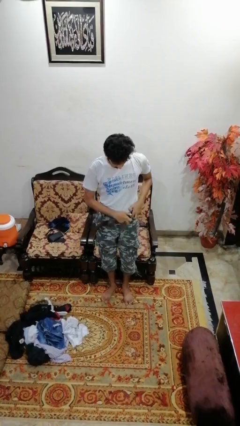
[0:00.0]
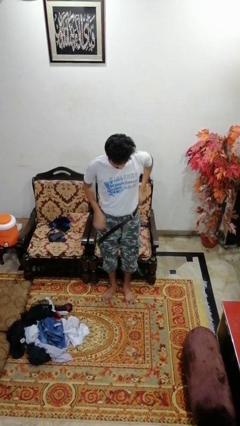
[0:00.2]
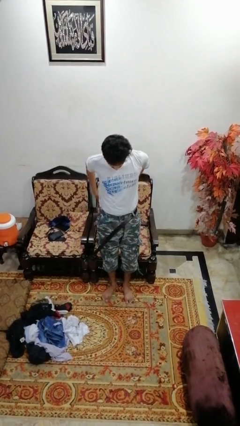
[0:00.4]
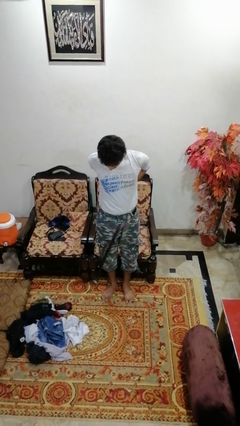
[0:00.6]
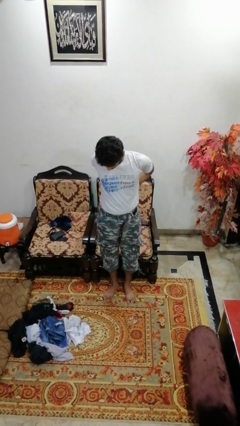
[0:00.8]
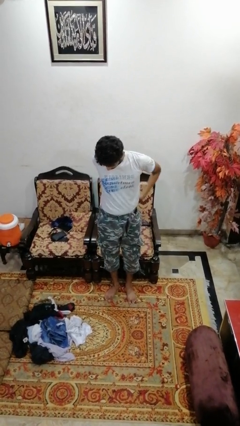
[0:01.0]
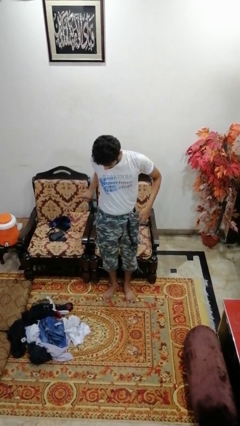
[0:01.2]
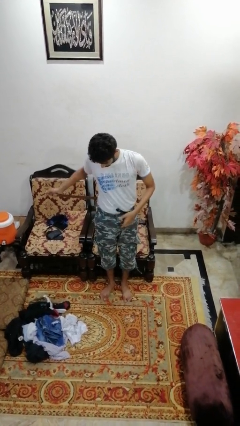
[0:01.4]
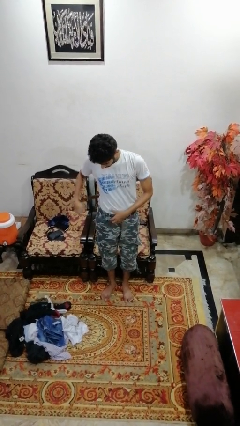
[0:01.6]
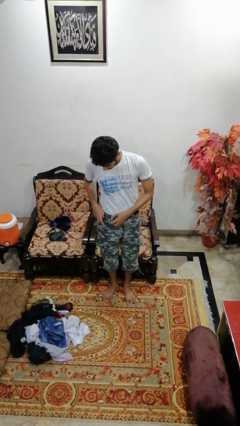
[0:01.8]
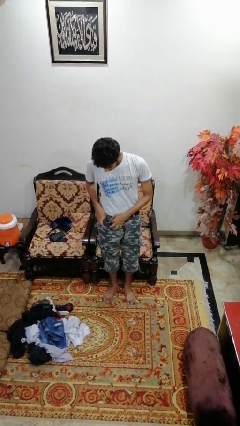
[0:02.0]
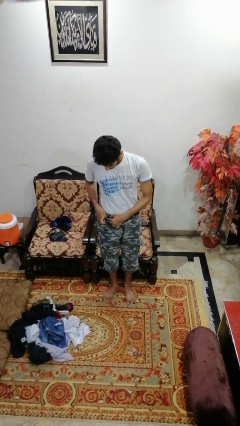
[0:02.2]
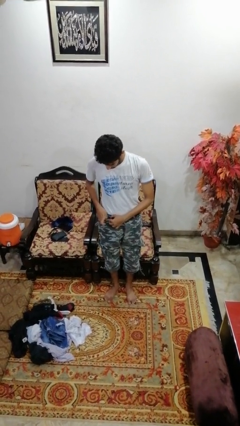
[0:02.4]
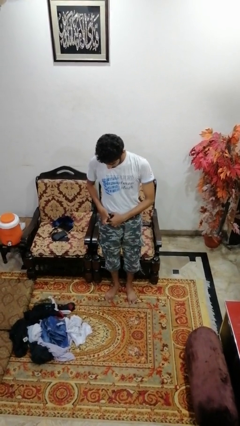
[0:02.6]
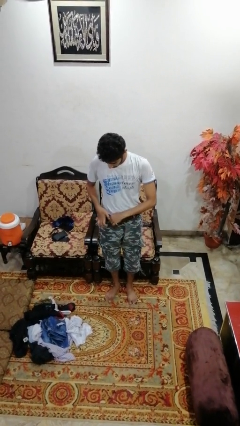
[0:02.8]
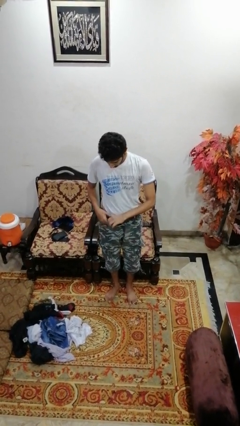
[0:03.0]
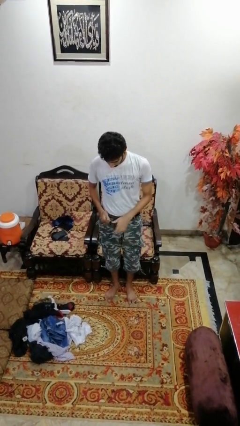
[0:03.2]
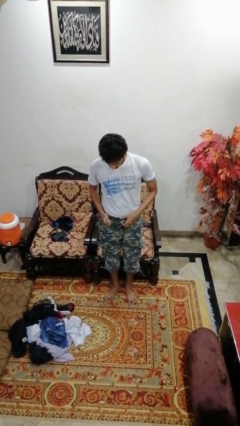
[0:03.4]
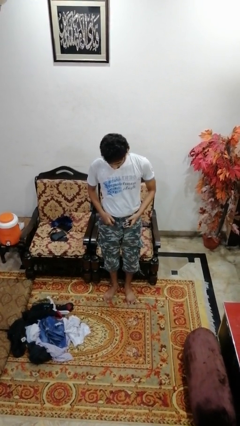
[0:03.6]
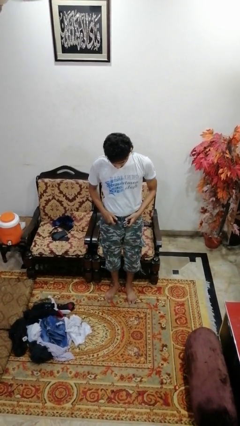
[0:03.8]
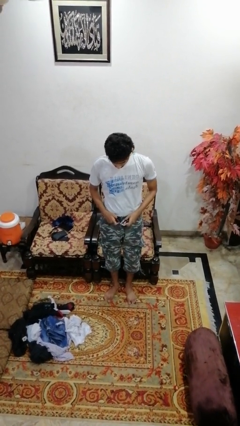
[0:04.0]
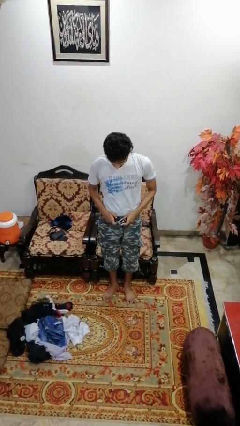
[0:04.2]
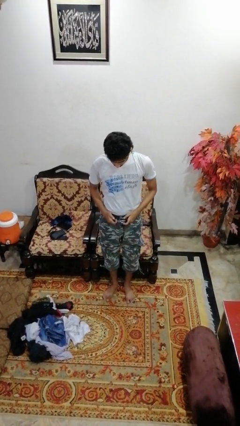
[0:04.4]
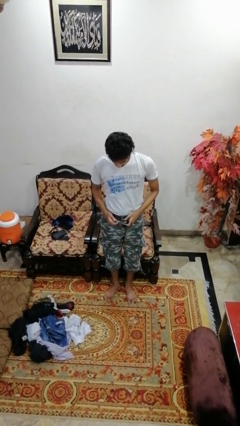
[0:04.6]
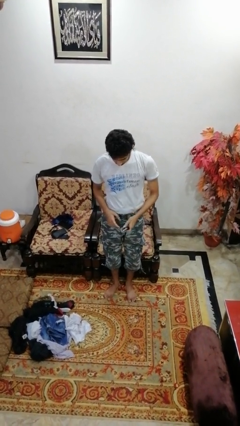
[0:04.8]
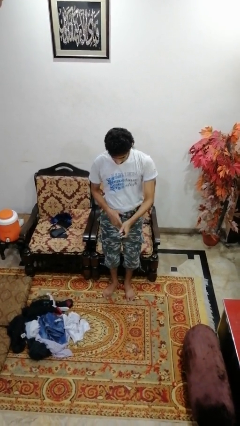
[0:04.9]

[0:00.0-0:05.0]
person puts on belt

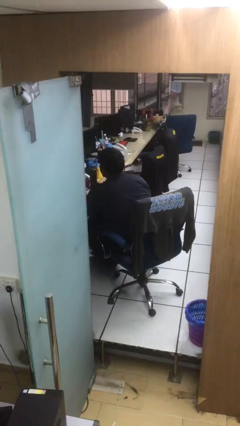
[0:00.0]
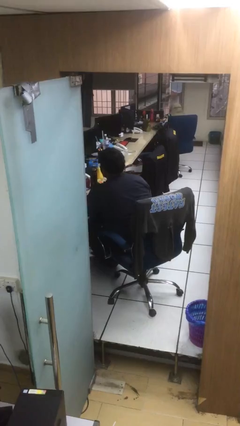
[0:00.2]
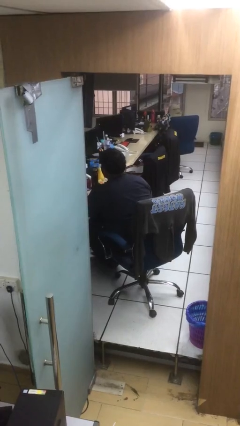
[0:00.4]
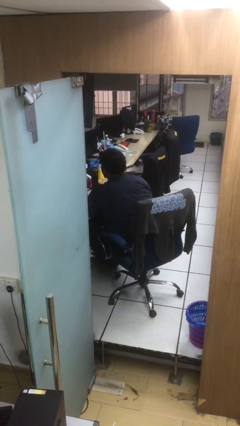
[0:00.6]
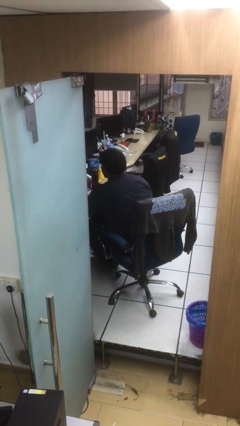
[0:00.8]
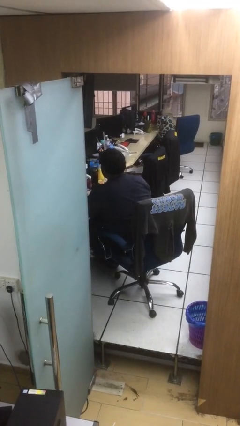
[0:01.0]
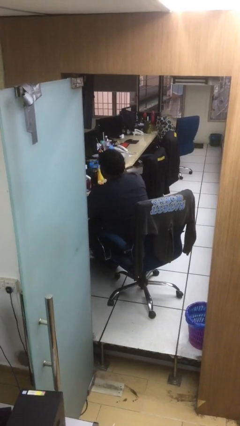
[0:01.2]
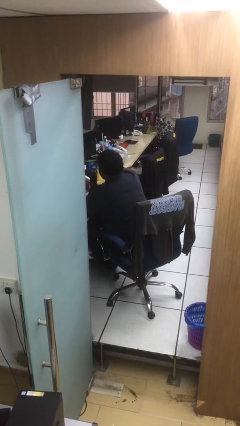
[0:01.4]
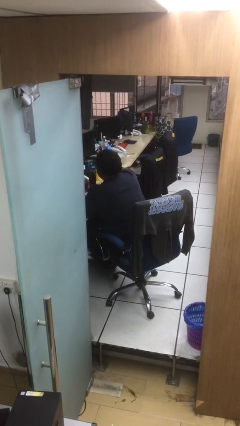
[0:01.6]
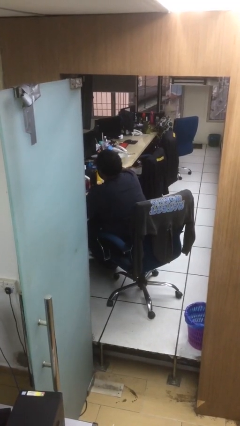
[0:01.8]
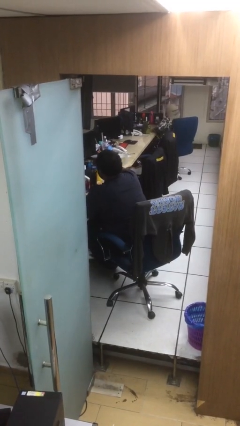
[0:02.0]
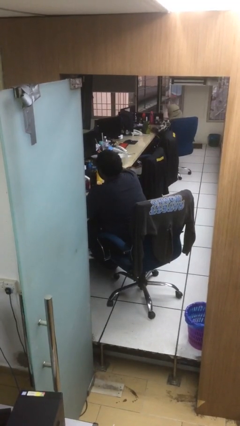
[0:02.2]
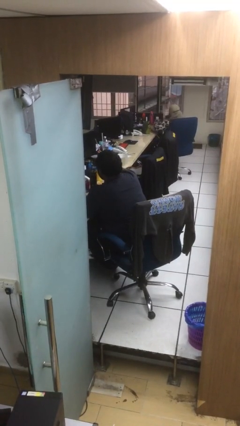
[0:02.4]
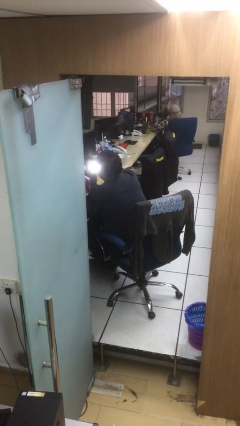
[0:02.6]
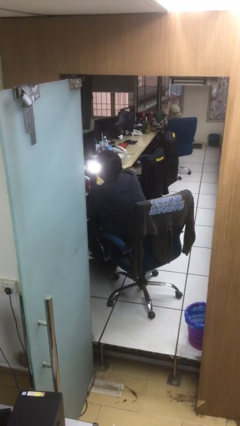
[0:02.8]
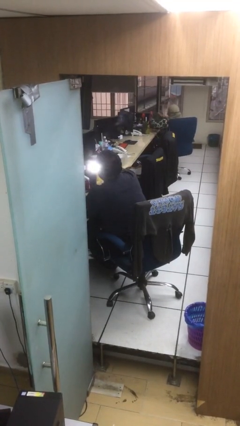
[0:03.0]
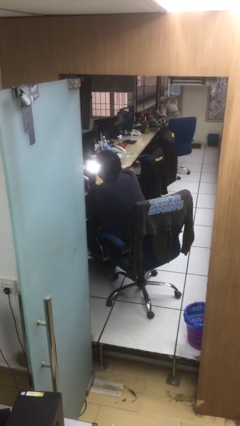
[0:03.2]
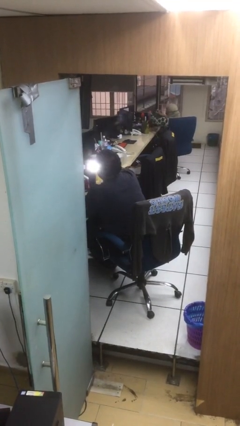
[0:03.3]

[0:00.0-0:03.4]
person turns on lamp

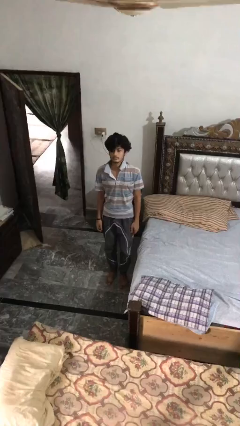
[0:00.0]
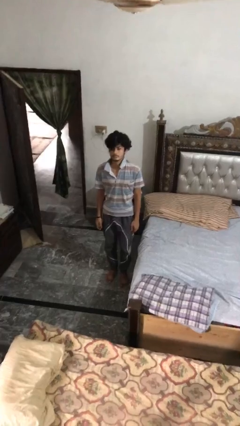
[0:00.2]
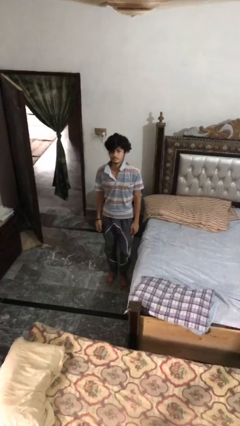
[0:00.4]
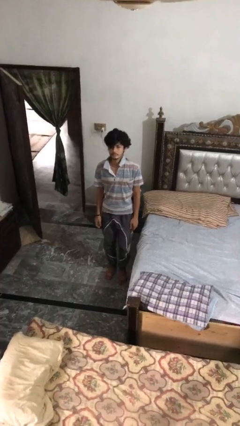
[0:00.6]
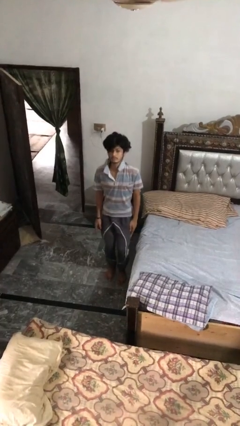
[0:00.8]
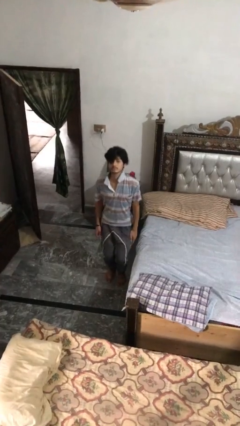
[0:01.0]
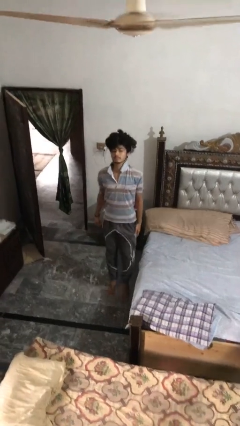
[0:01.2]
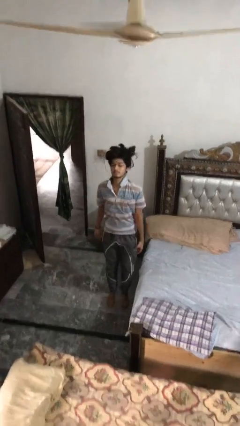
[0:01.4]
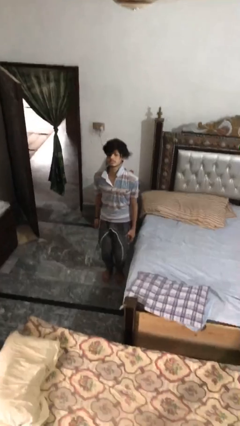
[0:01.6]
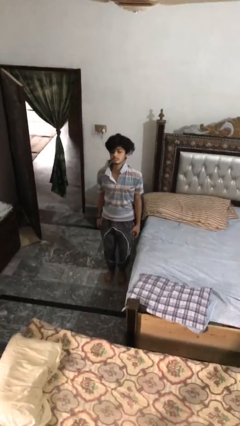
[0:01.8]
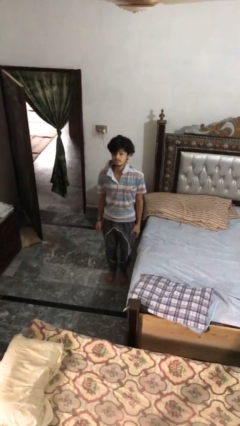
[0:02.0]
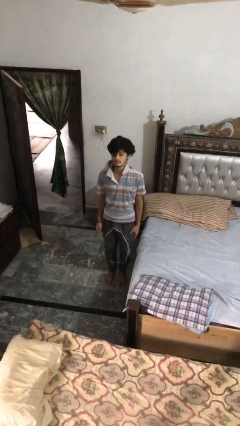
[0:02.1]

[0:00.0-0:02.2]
person jumps

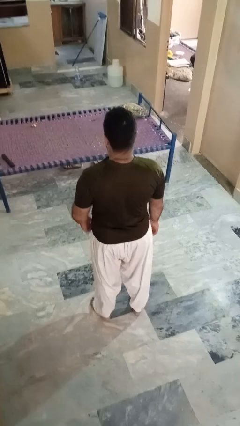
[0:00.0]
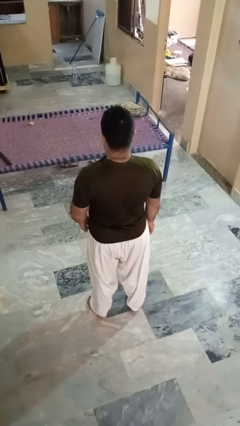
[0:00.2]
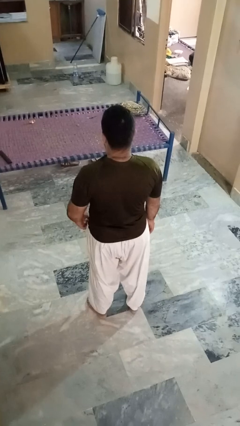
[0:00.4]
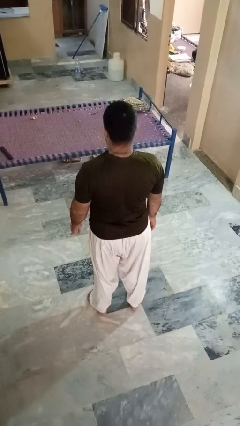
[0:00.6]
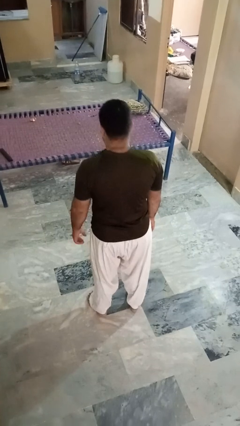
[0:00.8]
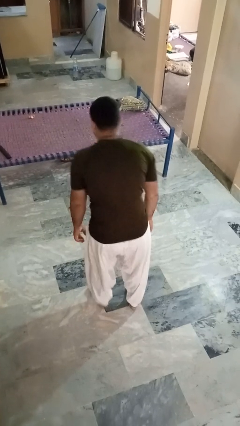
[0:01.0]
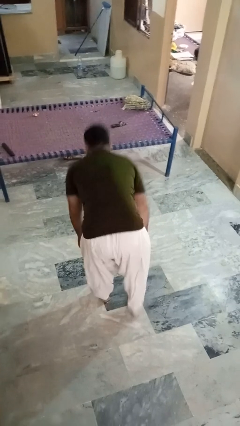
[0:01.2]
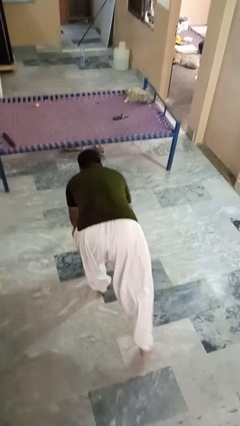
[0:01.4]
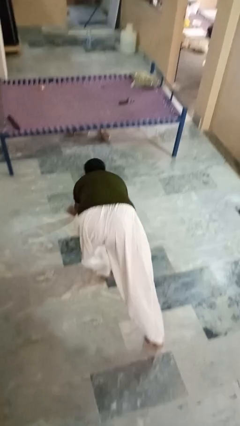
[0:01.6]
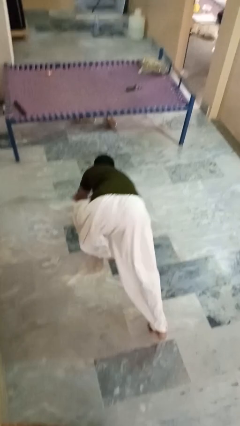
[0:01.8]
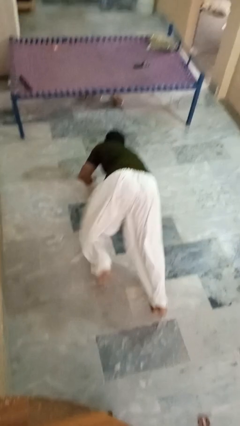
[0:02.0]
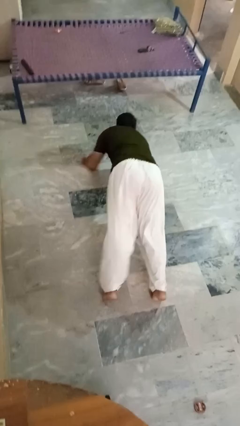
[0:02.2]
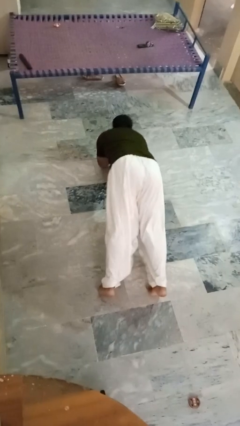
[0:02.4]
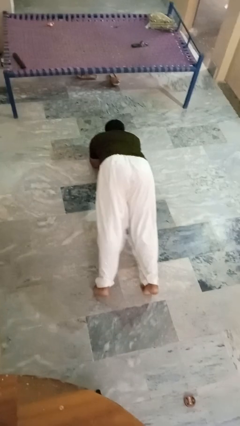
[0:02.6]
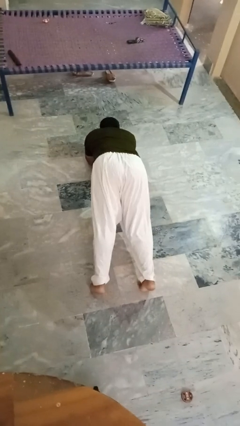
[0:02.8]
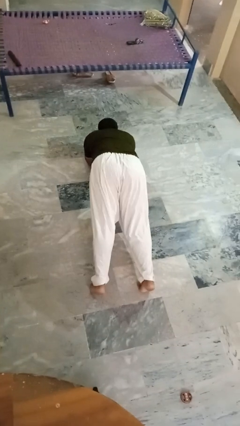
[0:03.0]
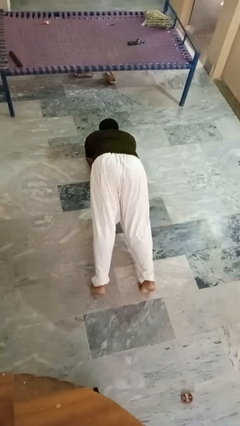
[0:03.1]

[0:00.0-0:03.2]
person exercises with plank

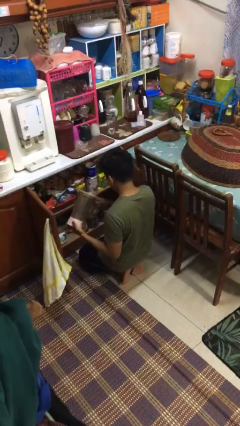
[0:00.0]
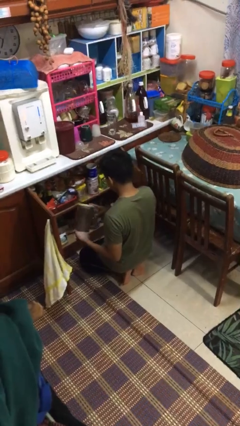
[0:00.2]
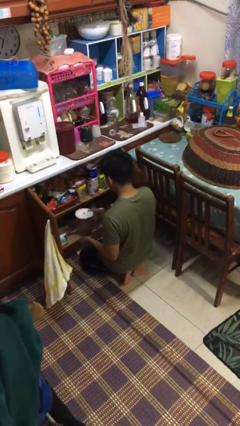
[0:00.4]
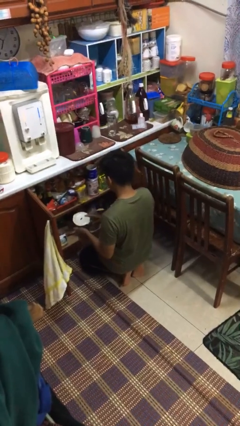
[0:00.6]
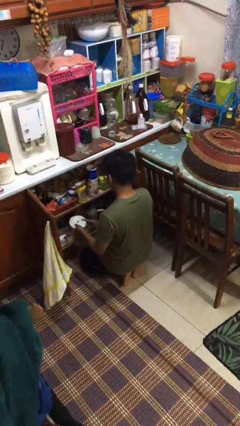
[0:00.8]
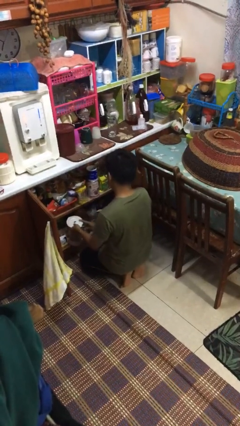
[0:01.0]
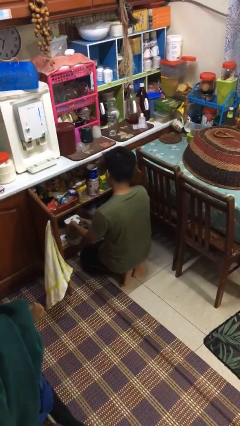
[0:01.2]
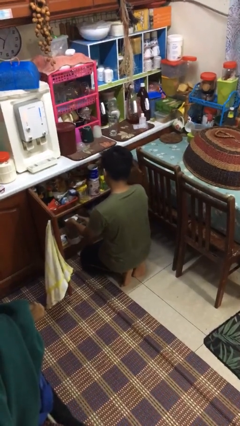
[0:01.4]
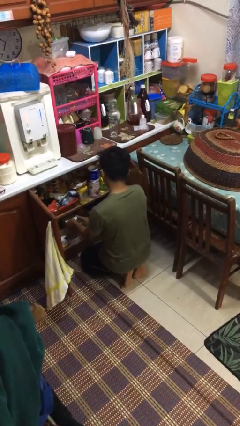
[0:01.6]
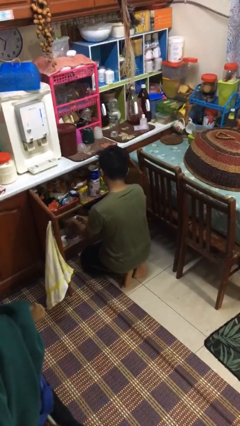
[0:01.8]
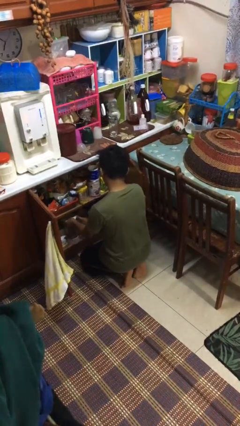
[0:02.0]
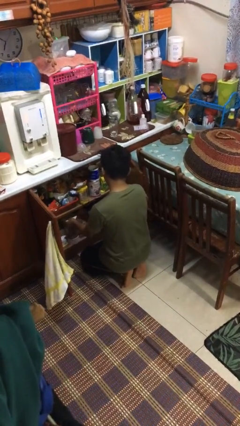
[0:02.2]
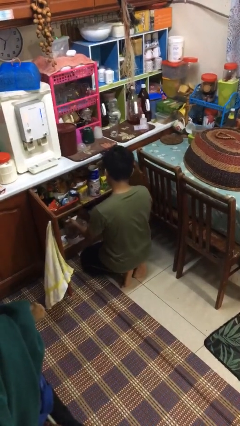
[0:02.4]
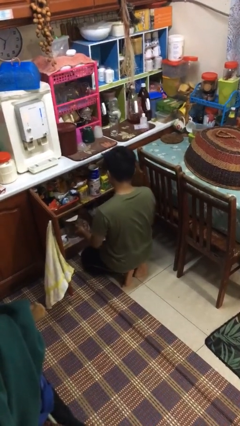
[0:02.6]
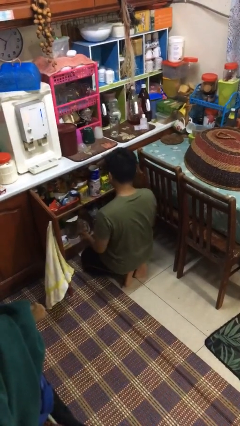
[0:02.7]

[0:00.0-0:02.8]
person puts object in cabinet

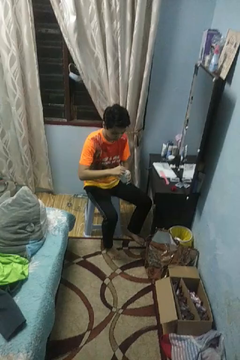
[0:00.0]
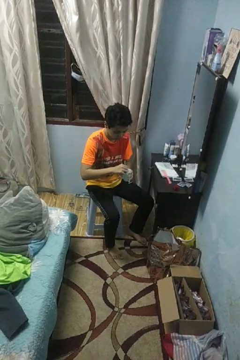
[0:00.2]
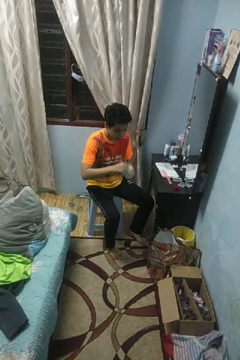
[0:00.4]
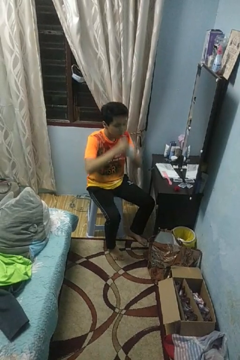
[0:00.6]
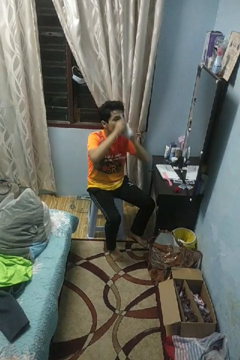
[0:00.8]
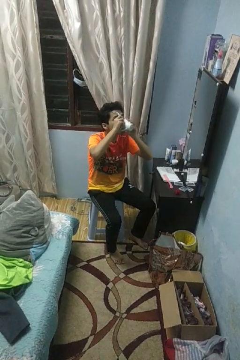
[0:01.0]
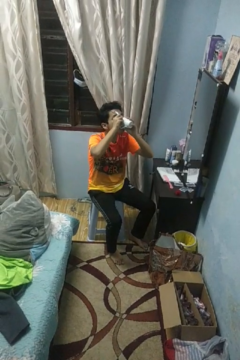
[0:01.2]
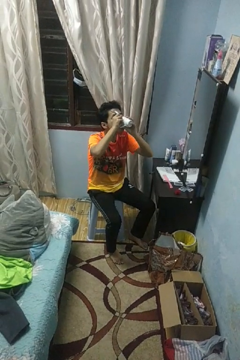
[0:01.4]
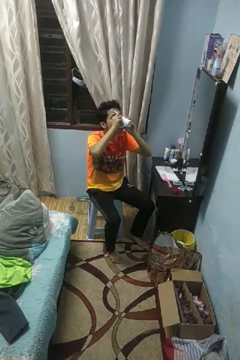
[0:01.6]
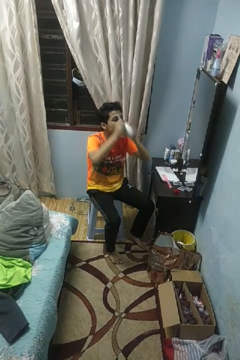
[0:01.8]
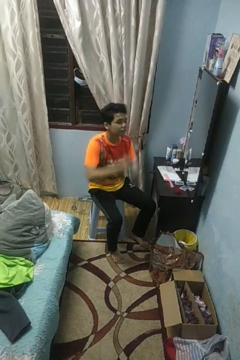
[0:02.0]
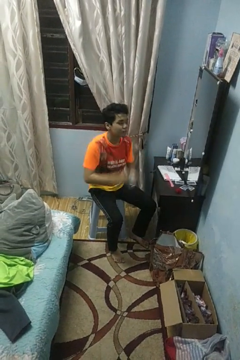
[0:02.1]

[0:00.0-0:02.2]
person drinks from mug
